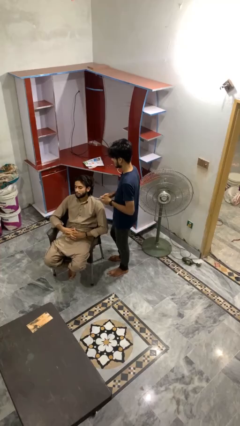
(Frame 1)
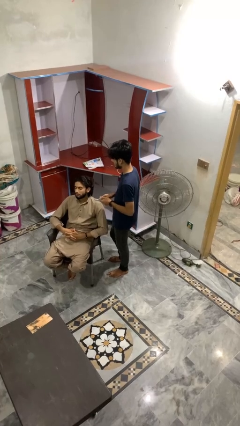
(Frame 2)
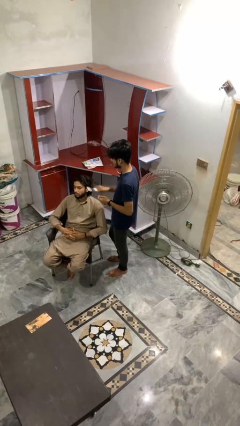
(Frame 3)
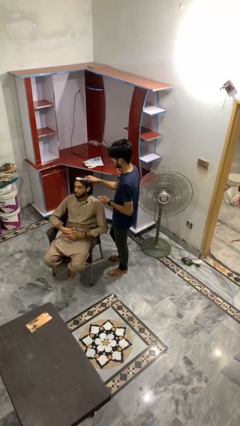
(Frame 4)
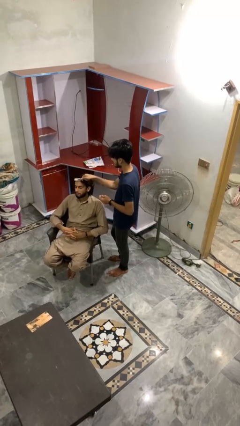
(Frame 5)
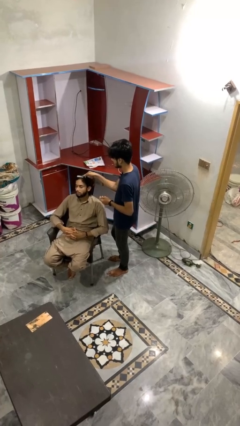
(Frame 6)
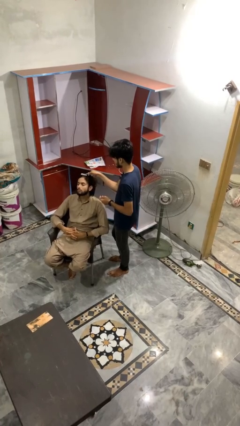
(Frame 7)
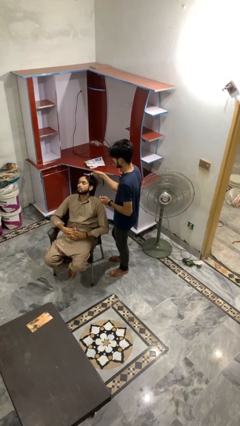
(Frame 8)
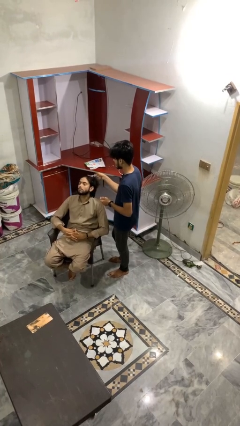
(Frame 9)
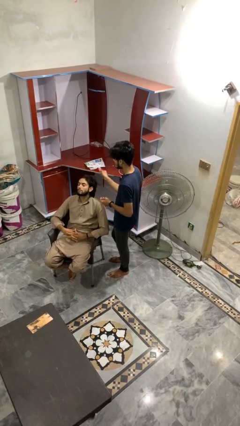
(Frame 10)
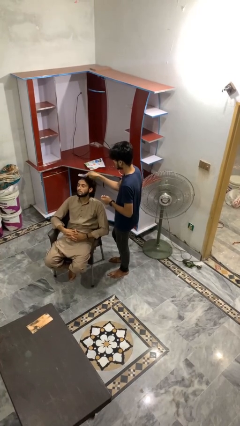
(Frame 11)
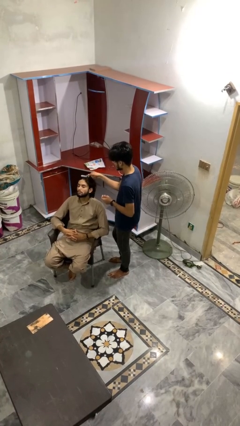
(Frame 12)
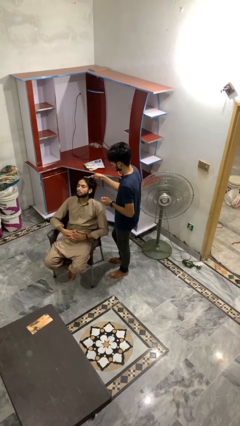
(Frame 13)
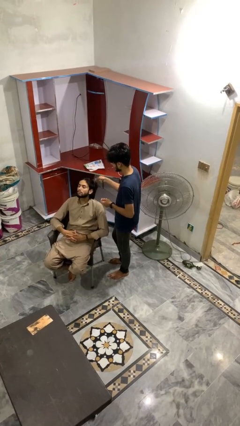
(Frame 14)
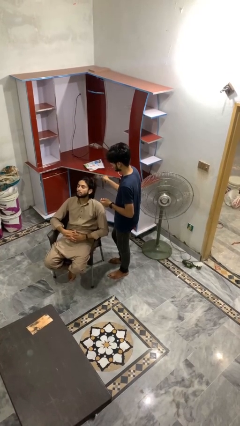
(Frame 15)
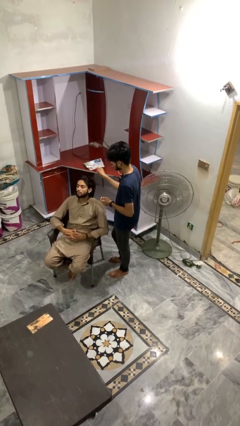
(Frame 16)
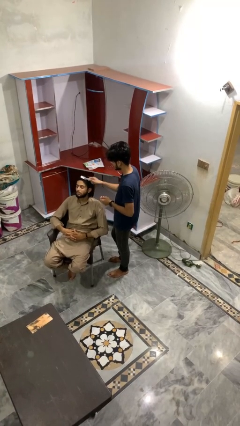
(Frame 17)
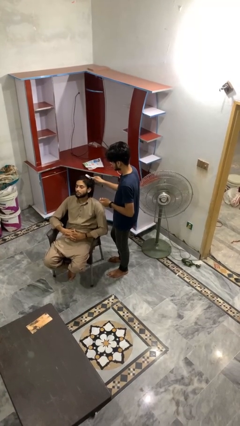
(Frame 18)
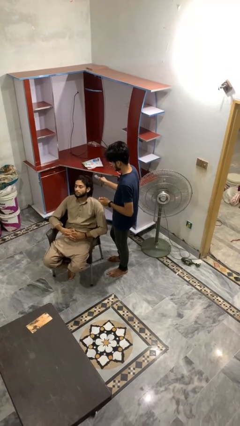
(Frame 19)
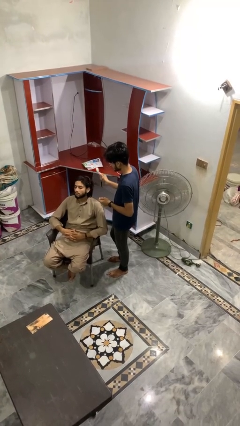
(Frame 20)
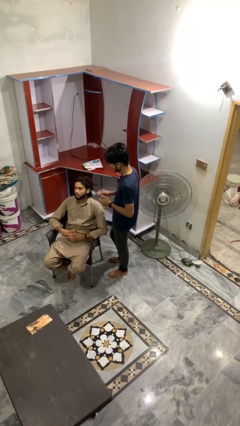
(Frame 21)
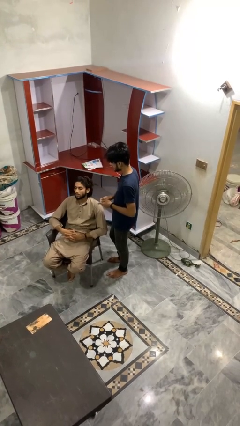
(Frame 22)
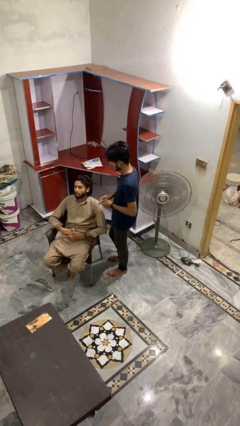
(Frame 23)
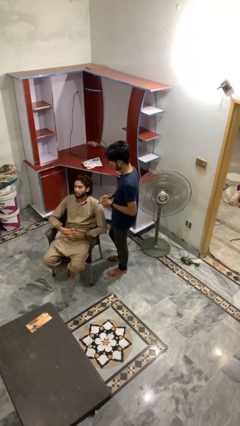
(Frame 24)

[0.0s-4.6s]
person brushes hair of person

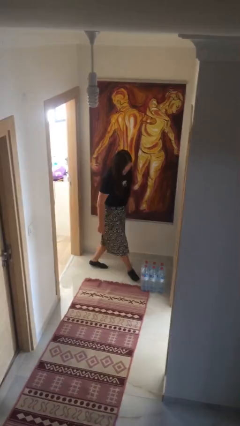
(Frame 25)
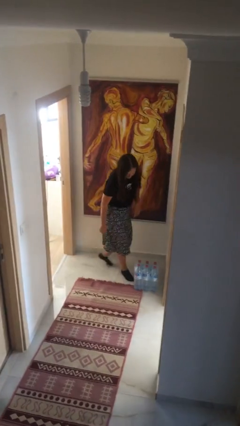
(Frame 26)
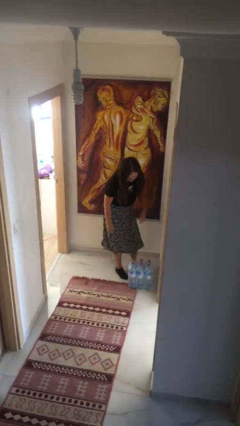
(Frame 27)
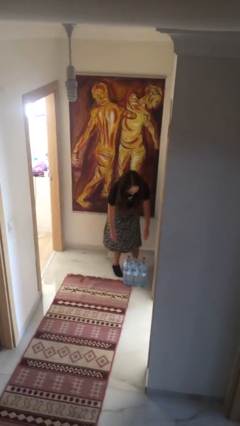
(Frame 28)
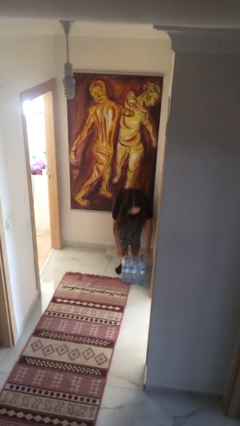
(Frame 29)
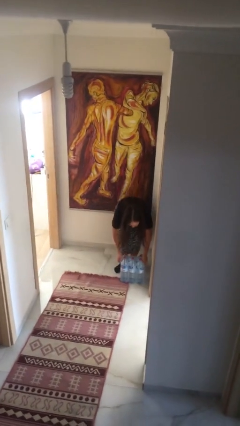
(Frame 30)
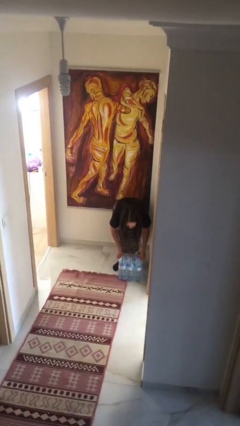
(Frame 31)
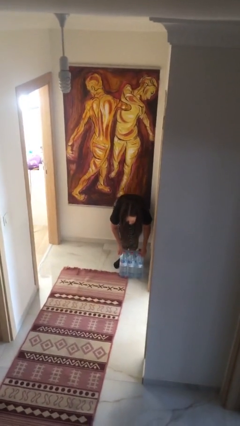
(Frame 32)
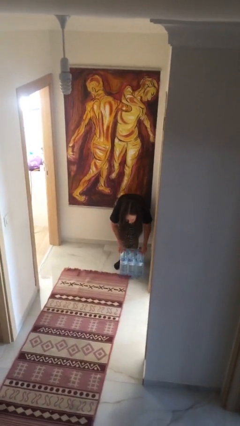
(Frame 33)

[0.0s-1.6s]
person picks up object from floor

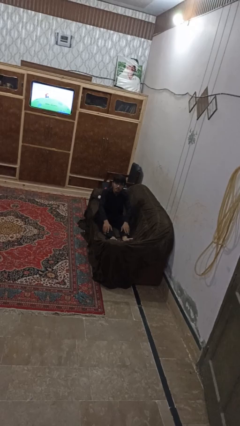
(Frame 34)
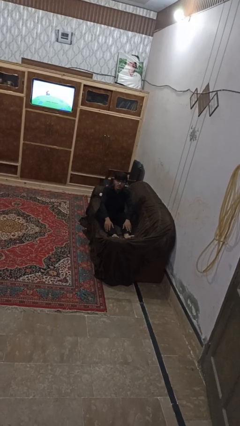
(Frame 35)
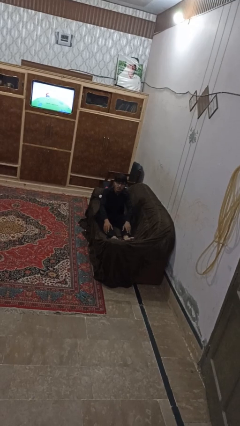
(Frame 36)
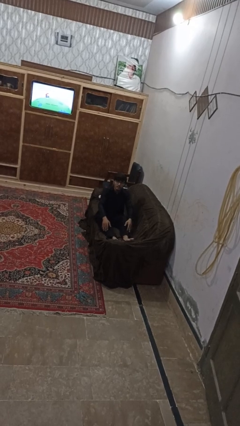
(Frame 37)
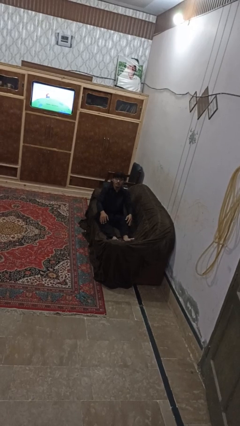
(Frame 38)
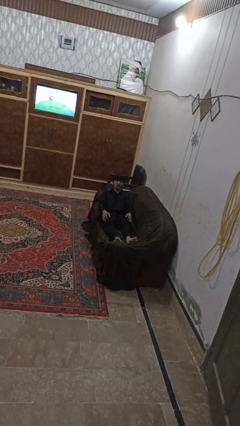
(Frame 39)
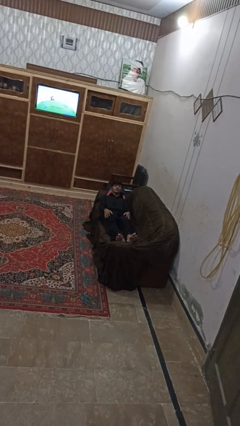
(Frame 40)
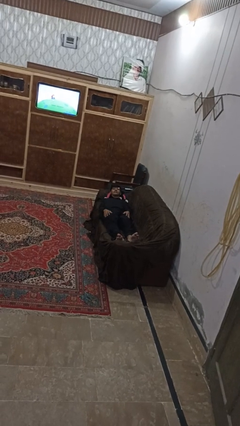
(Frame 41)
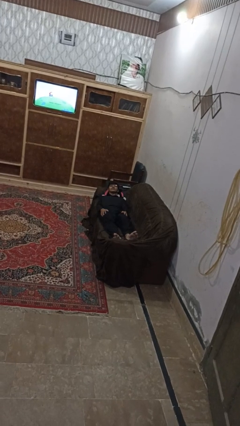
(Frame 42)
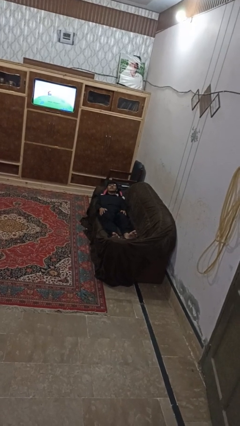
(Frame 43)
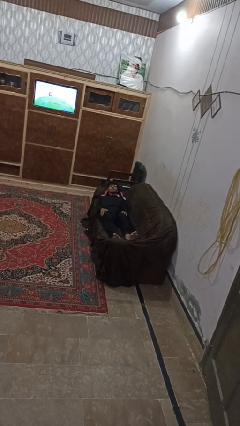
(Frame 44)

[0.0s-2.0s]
person lies down on couch

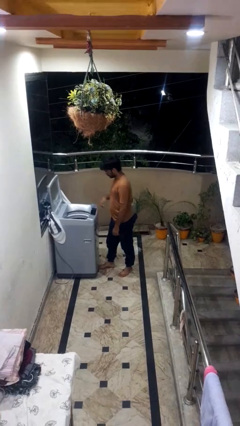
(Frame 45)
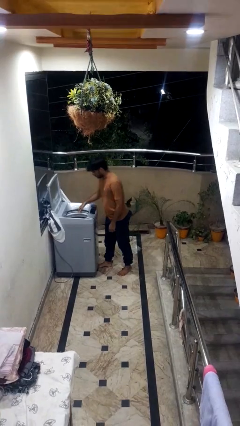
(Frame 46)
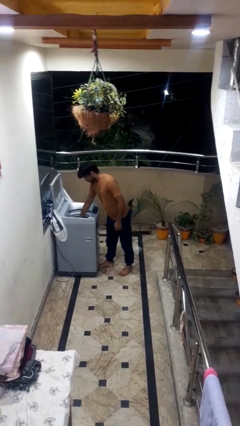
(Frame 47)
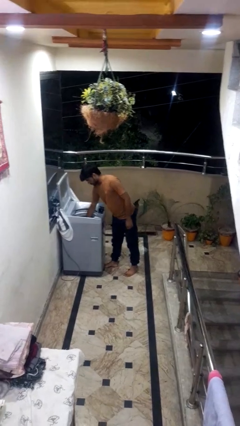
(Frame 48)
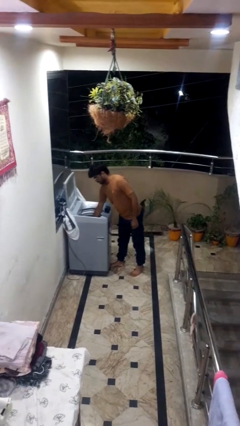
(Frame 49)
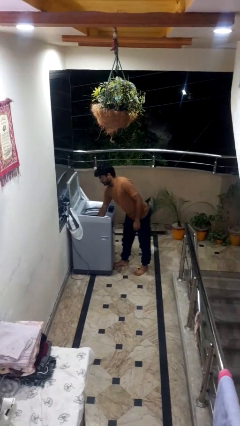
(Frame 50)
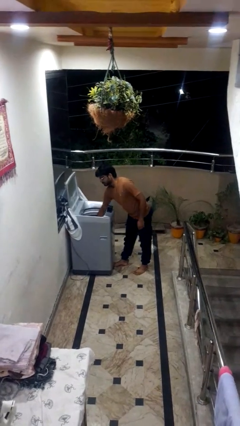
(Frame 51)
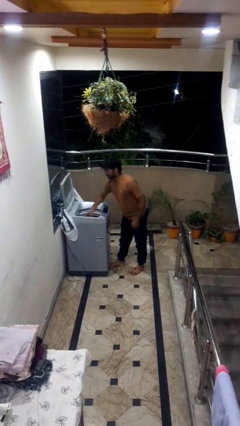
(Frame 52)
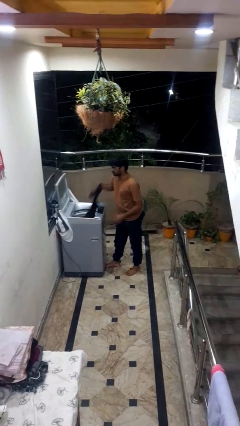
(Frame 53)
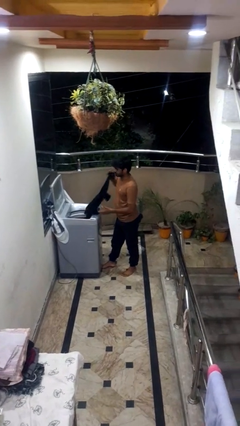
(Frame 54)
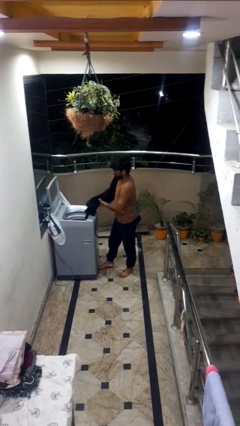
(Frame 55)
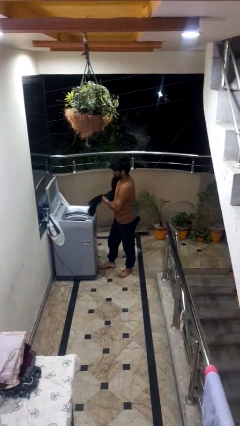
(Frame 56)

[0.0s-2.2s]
person loads clotheswasher

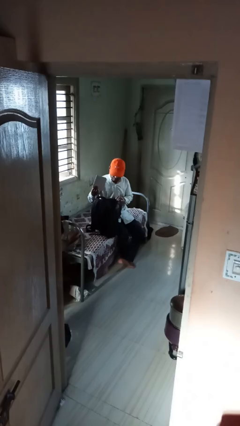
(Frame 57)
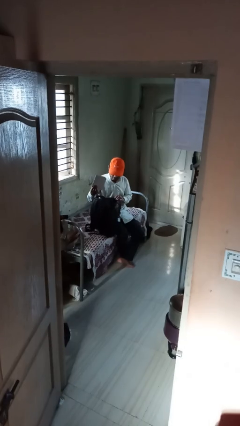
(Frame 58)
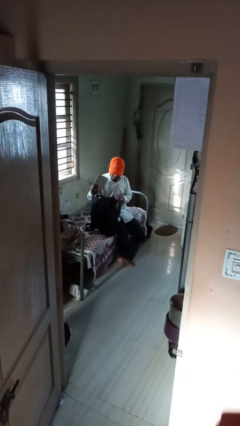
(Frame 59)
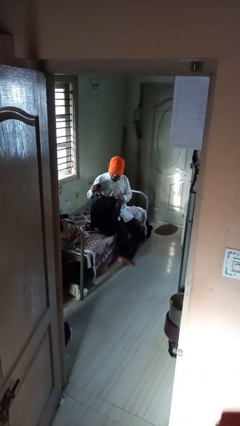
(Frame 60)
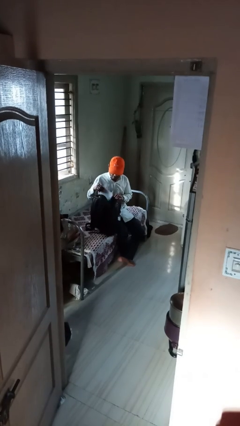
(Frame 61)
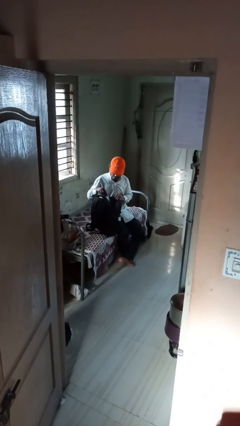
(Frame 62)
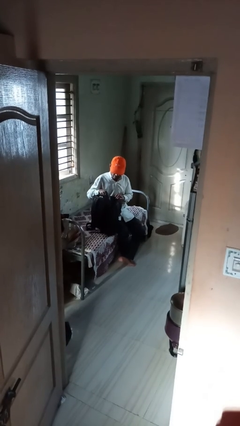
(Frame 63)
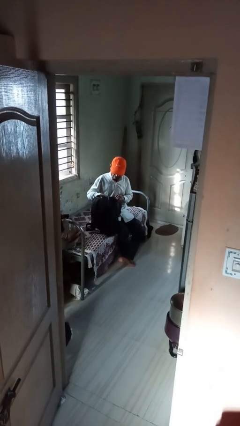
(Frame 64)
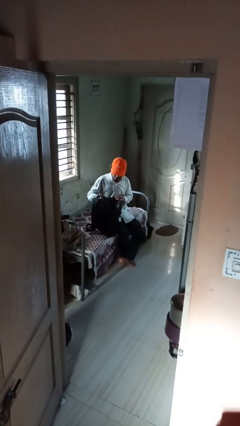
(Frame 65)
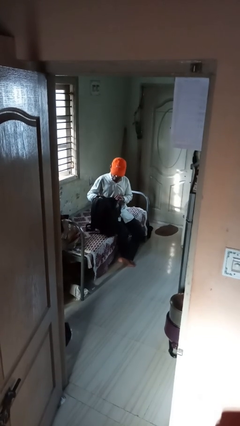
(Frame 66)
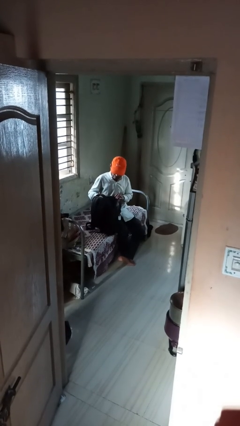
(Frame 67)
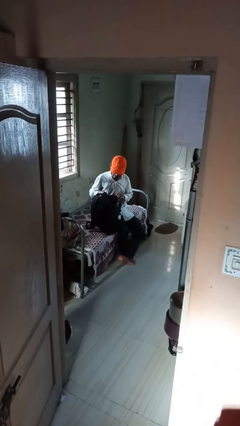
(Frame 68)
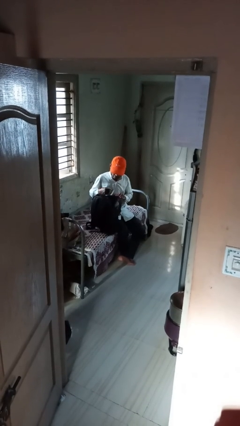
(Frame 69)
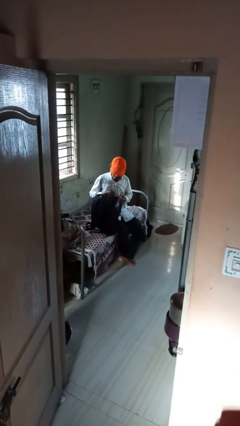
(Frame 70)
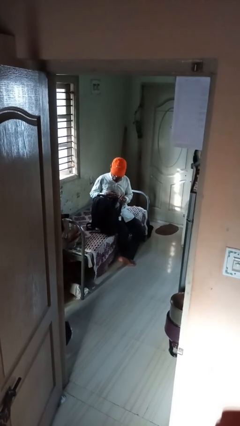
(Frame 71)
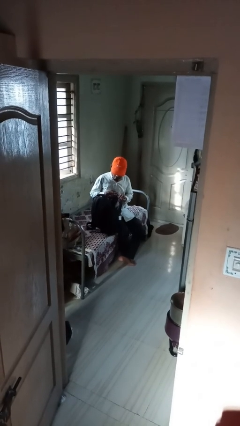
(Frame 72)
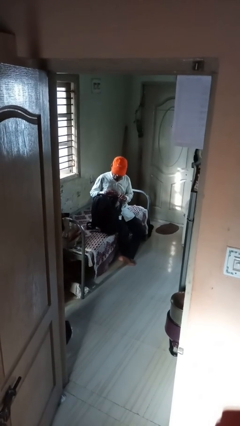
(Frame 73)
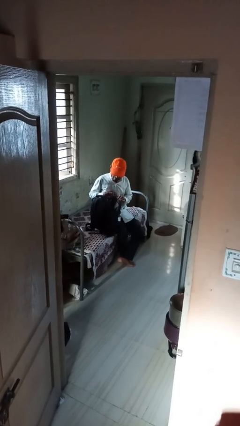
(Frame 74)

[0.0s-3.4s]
person puts object into backpack

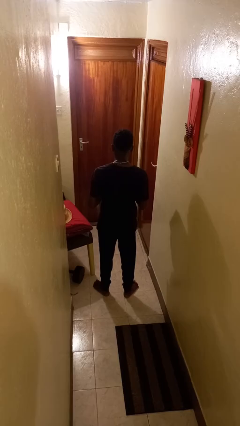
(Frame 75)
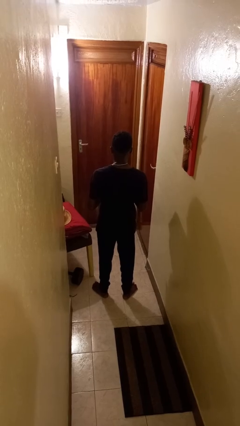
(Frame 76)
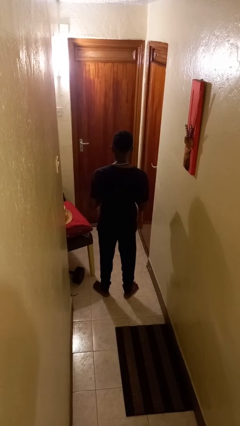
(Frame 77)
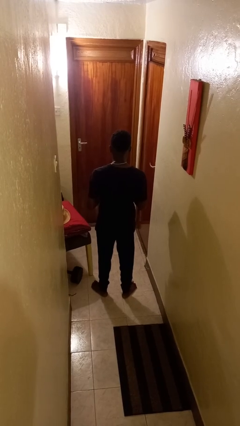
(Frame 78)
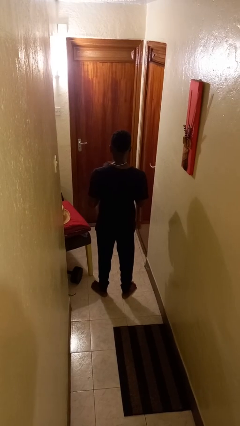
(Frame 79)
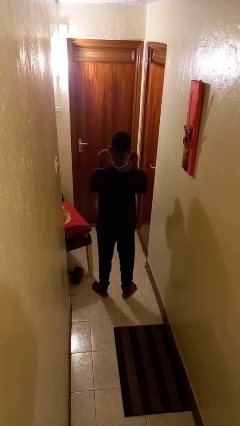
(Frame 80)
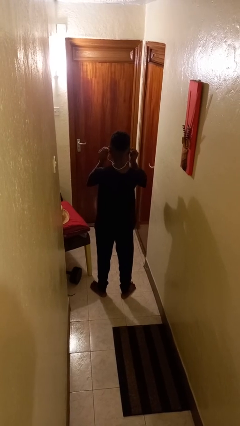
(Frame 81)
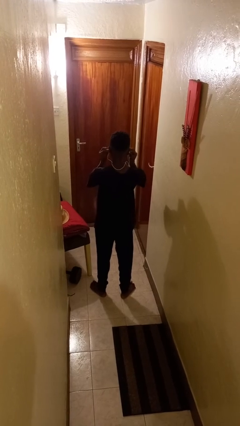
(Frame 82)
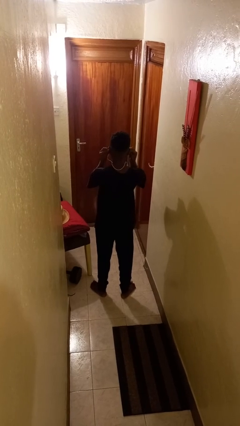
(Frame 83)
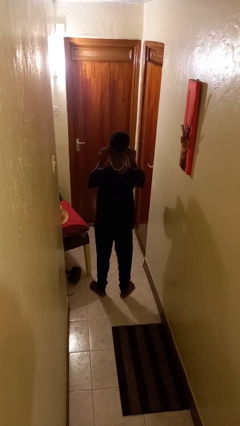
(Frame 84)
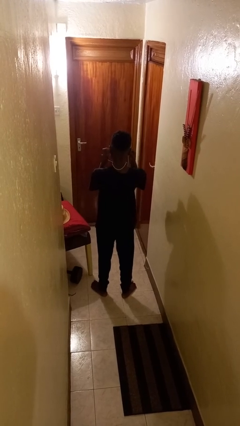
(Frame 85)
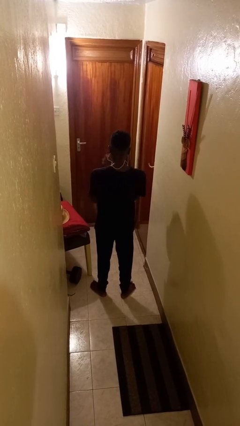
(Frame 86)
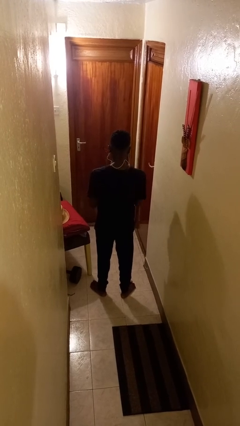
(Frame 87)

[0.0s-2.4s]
person puts on headphones

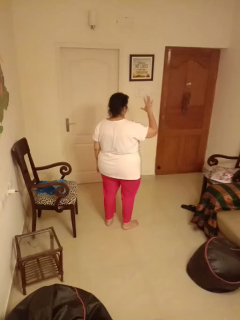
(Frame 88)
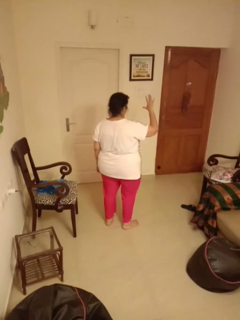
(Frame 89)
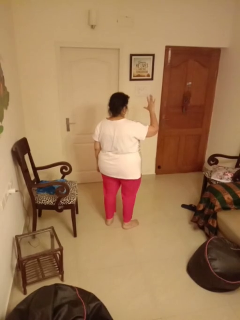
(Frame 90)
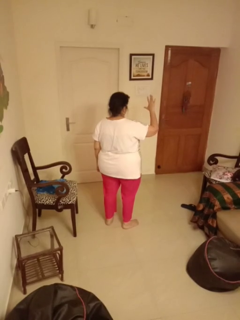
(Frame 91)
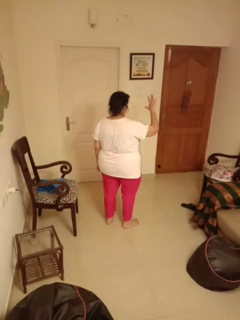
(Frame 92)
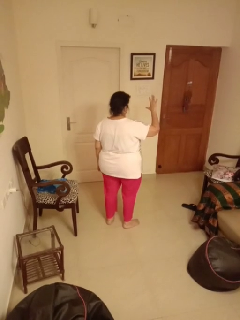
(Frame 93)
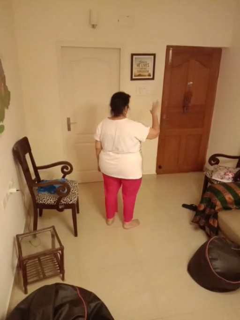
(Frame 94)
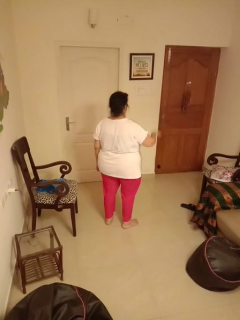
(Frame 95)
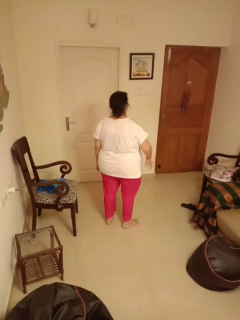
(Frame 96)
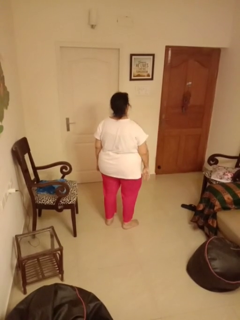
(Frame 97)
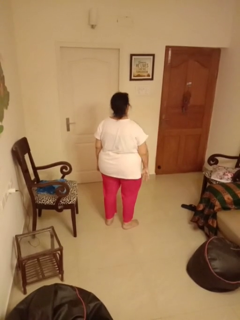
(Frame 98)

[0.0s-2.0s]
person gestures number five
